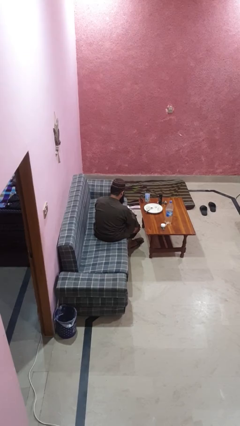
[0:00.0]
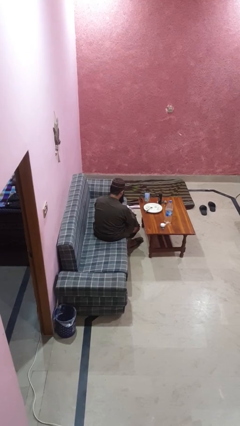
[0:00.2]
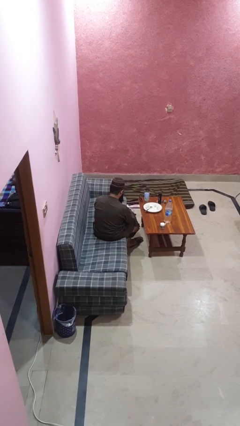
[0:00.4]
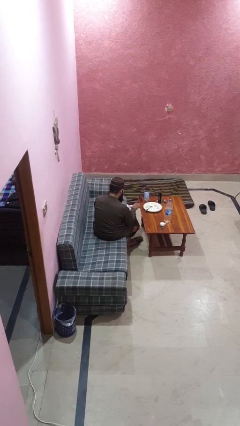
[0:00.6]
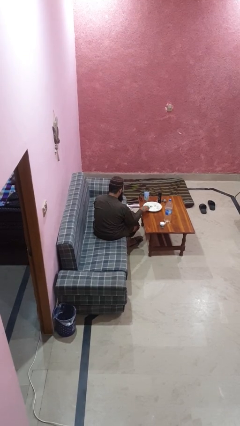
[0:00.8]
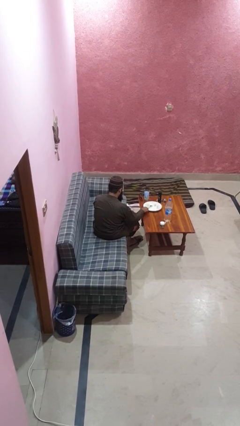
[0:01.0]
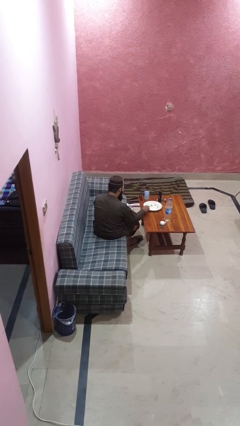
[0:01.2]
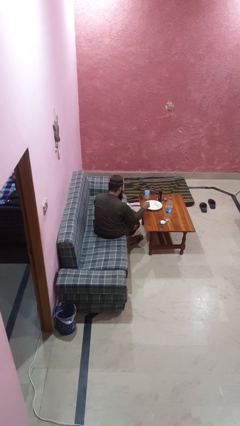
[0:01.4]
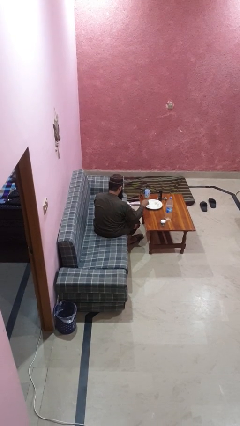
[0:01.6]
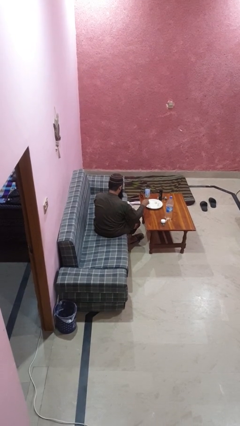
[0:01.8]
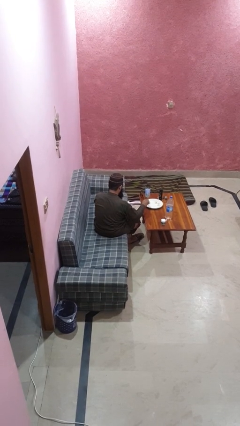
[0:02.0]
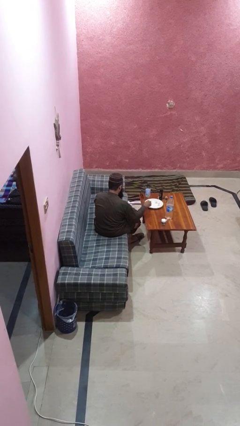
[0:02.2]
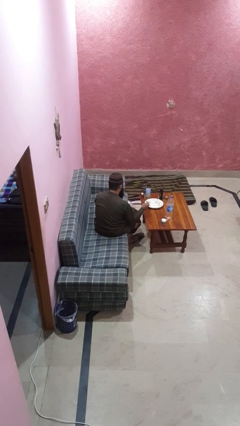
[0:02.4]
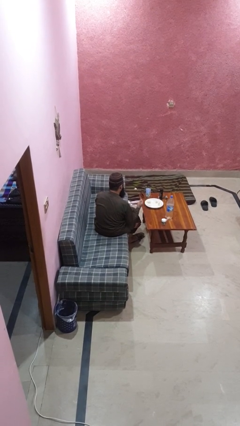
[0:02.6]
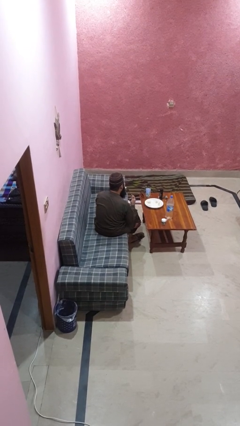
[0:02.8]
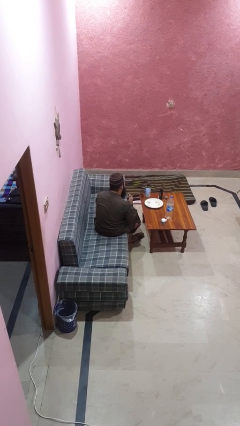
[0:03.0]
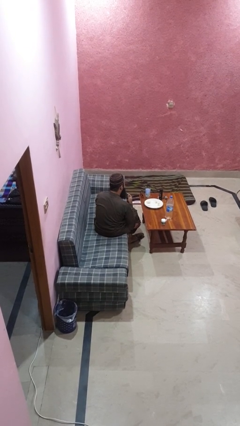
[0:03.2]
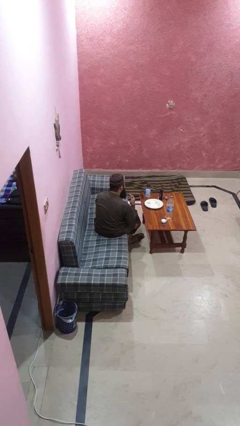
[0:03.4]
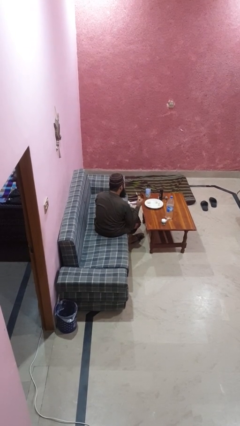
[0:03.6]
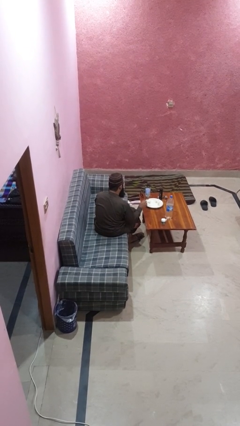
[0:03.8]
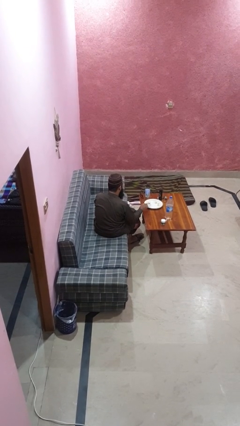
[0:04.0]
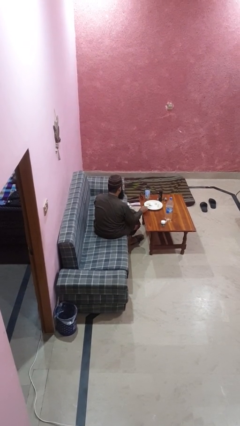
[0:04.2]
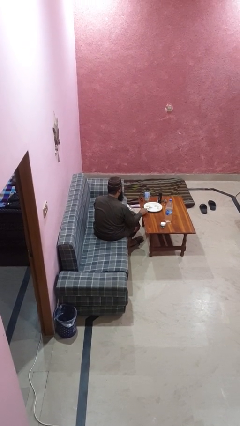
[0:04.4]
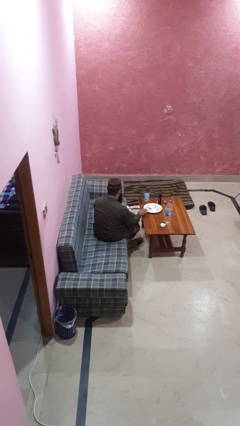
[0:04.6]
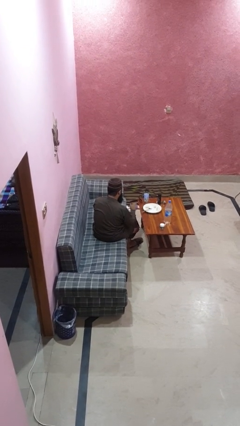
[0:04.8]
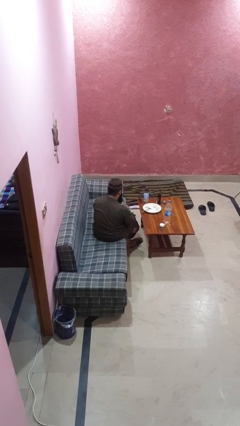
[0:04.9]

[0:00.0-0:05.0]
person eats with utensil

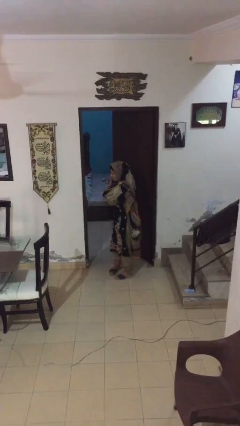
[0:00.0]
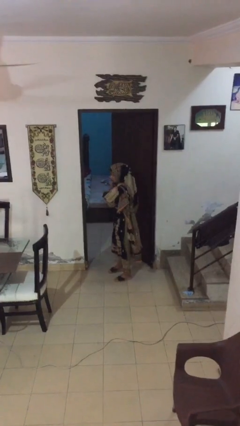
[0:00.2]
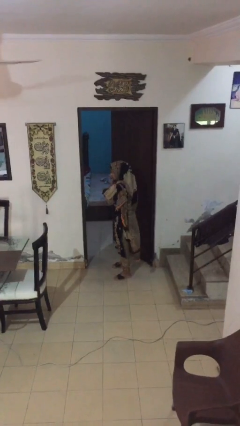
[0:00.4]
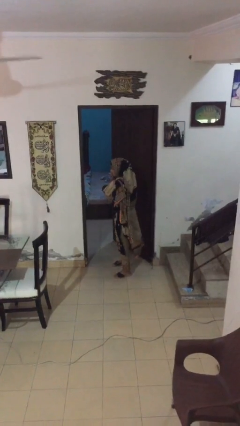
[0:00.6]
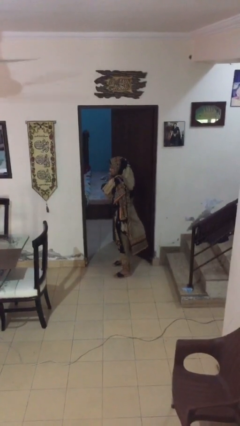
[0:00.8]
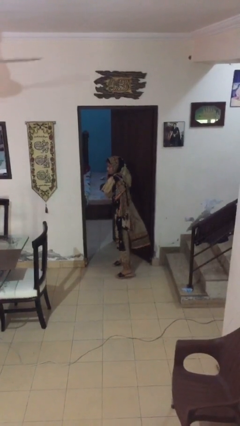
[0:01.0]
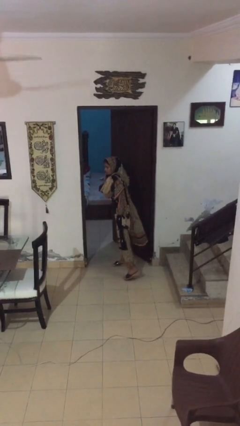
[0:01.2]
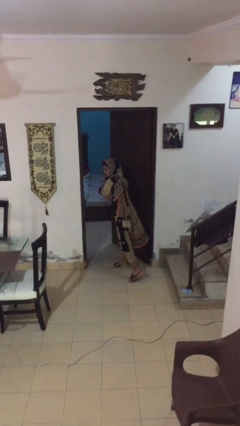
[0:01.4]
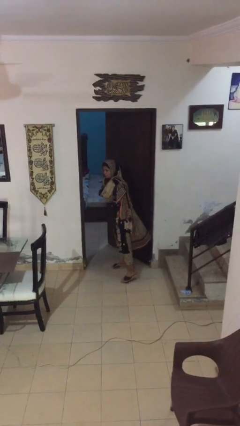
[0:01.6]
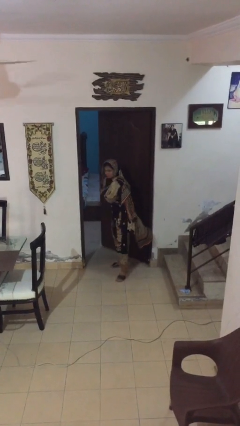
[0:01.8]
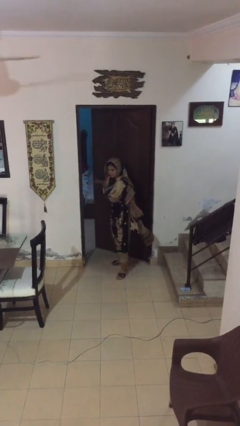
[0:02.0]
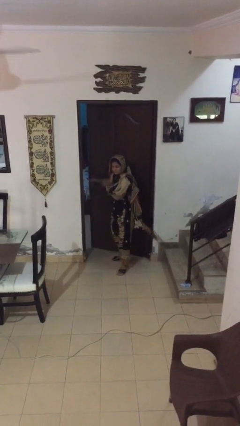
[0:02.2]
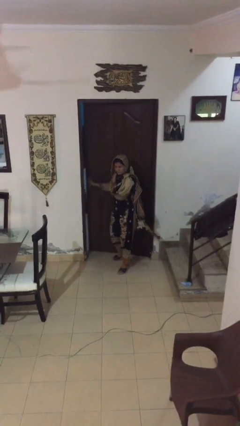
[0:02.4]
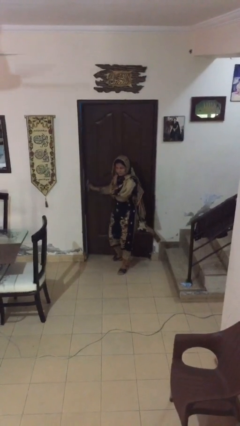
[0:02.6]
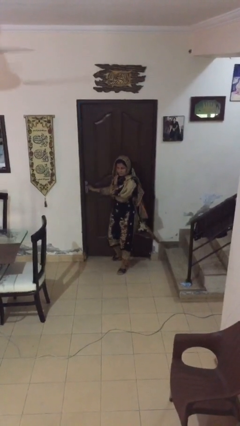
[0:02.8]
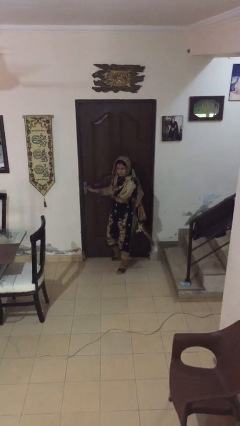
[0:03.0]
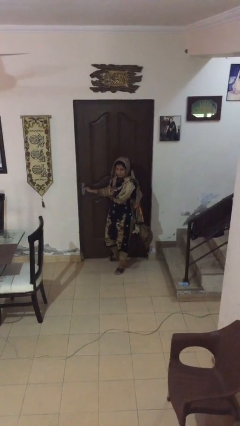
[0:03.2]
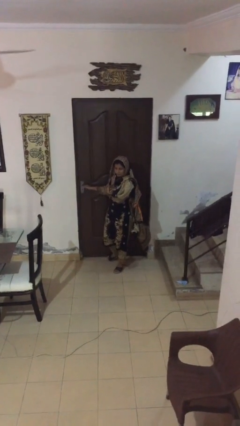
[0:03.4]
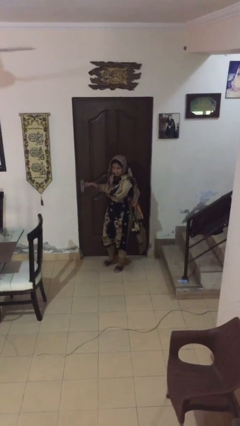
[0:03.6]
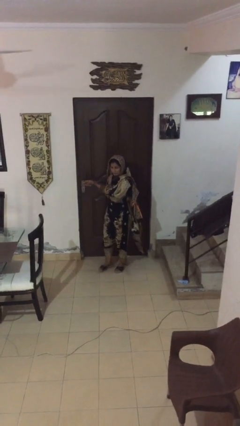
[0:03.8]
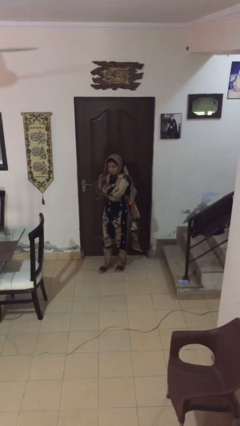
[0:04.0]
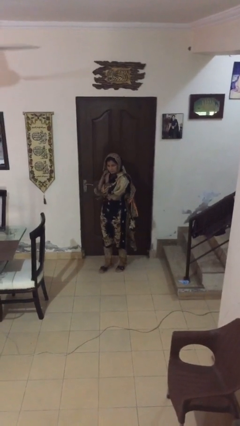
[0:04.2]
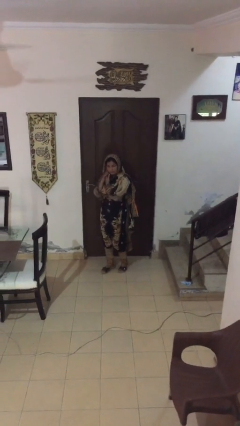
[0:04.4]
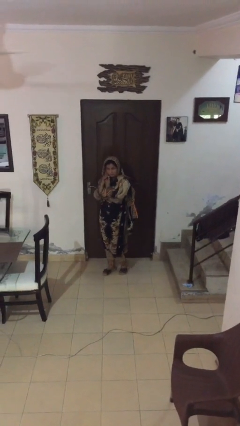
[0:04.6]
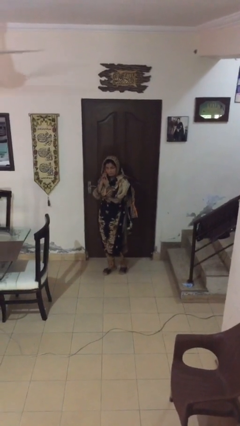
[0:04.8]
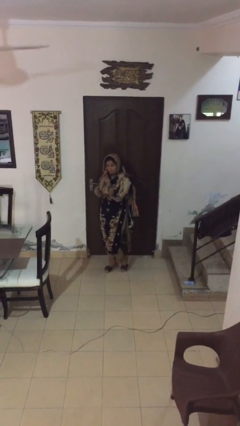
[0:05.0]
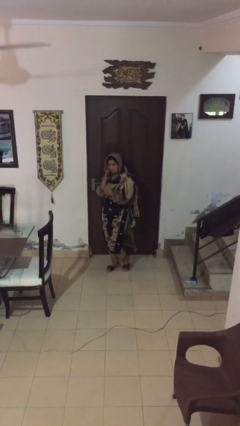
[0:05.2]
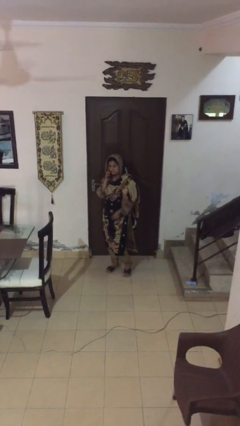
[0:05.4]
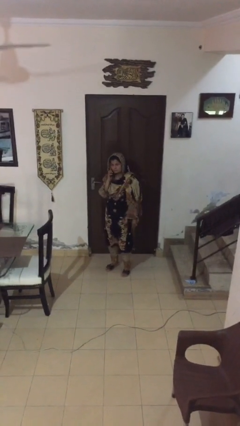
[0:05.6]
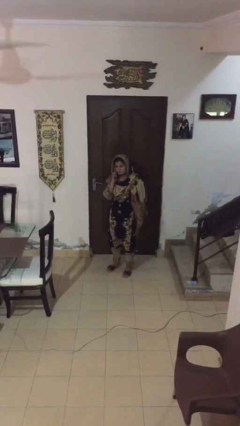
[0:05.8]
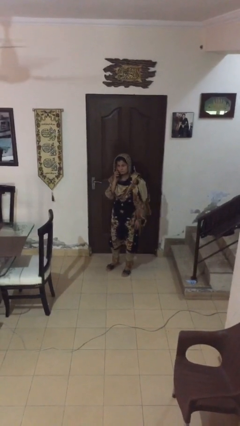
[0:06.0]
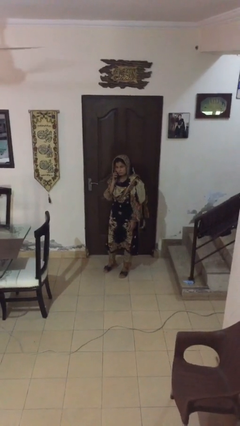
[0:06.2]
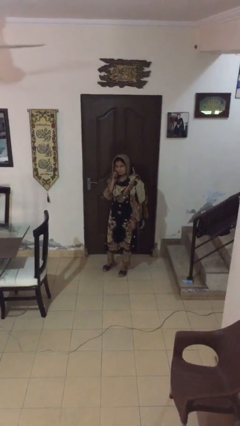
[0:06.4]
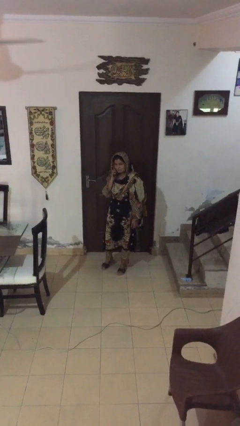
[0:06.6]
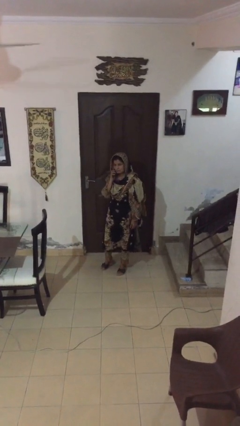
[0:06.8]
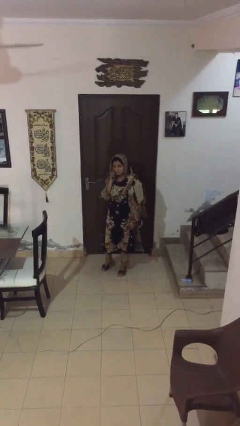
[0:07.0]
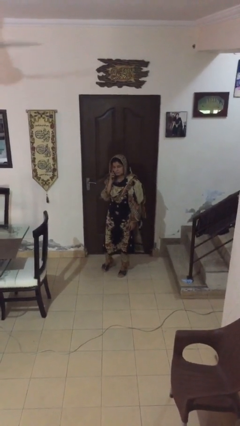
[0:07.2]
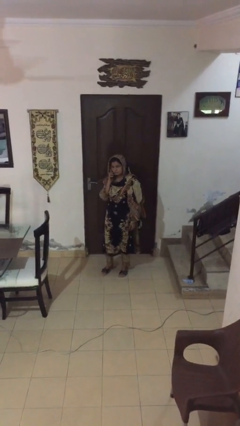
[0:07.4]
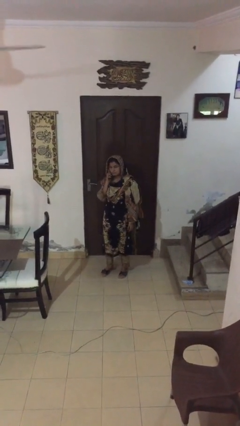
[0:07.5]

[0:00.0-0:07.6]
person closes facility door

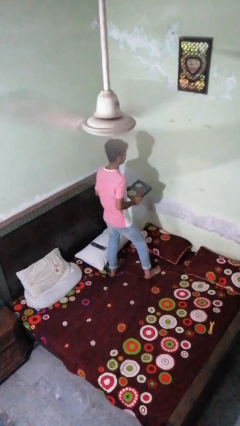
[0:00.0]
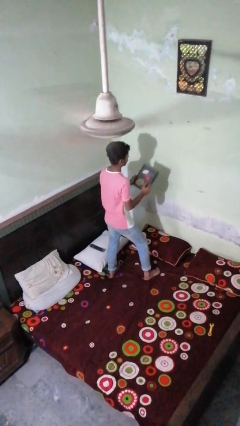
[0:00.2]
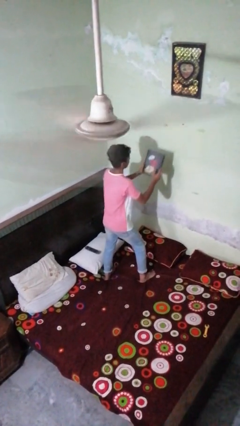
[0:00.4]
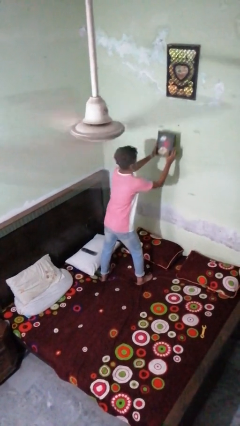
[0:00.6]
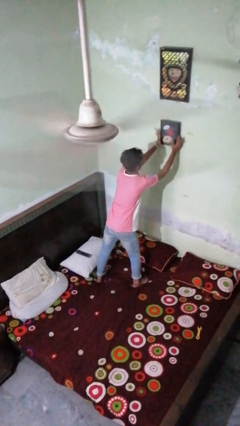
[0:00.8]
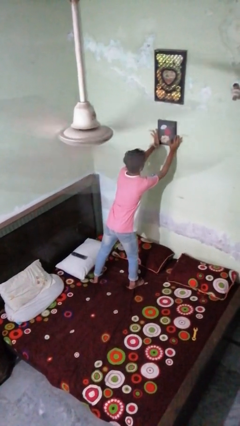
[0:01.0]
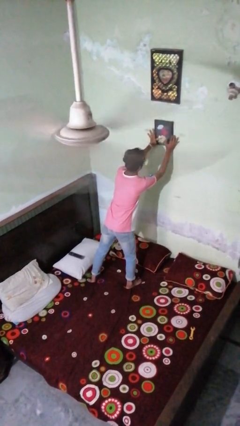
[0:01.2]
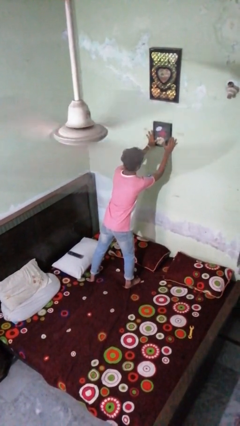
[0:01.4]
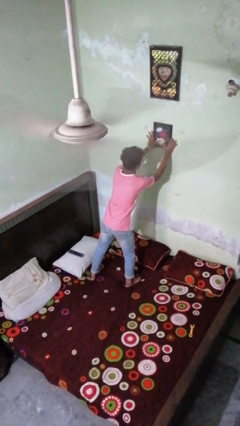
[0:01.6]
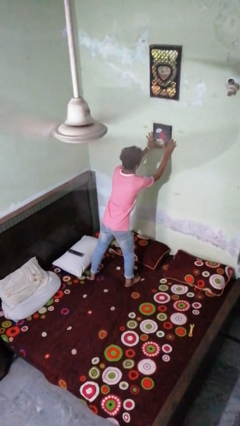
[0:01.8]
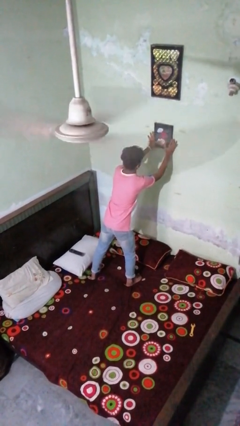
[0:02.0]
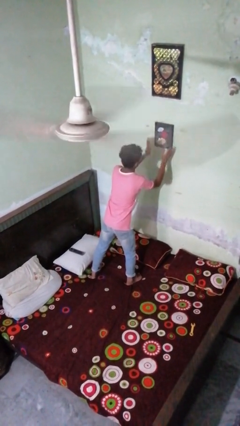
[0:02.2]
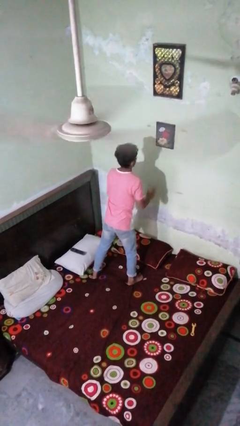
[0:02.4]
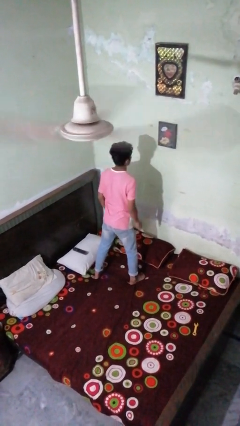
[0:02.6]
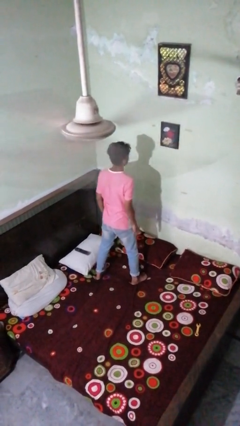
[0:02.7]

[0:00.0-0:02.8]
person puts up picture frame

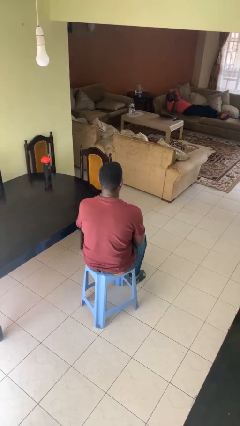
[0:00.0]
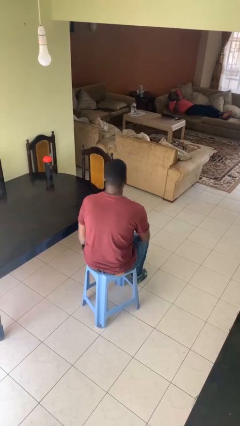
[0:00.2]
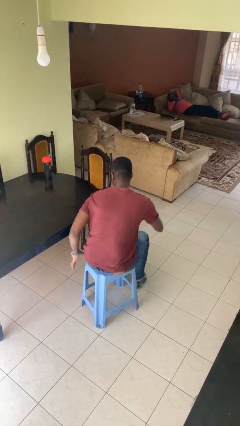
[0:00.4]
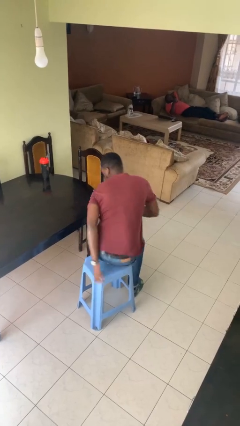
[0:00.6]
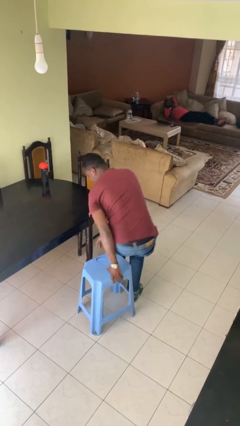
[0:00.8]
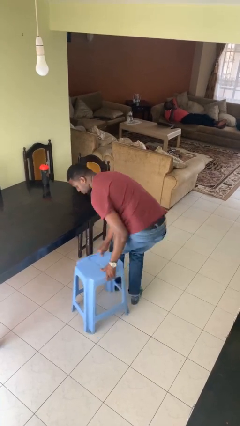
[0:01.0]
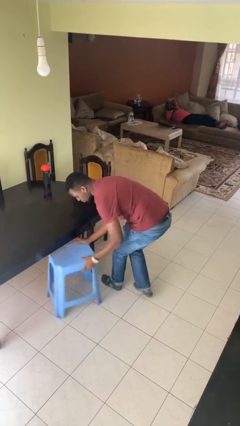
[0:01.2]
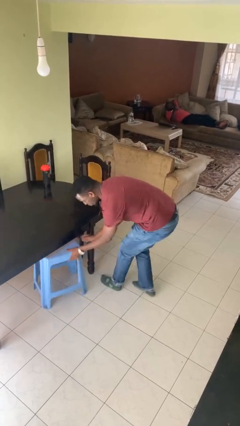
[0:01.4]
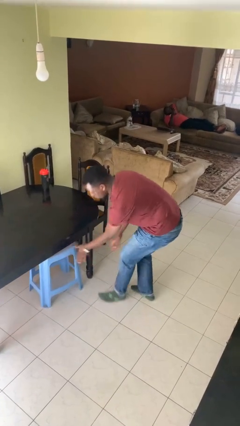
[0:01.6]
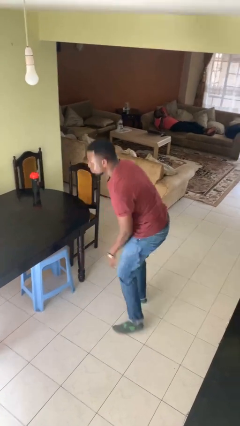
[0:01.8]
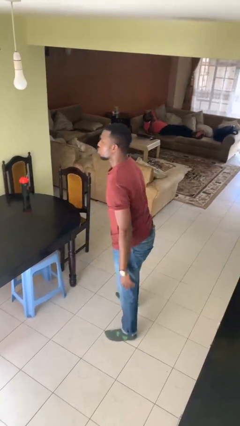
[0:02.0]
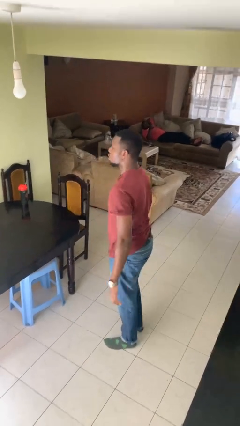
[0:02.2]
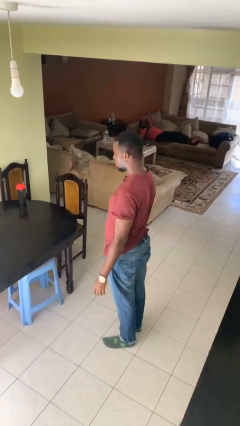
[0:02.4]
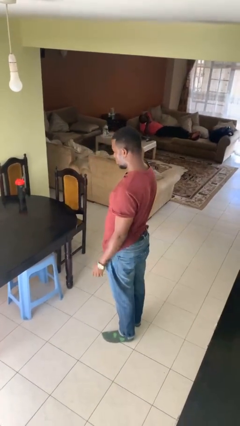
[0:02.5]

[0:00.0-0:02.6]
person stands up
